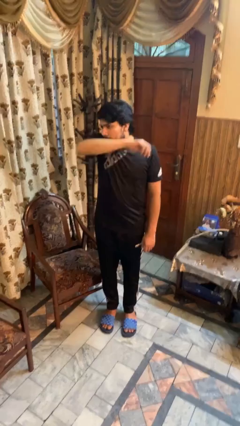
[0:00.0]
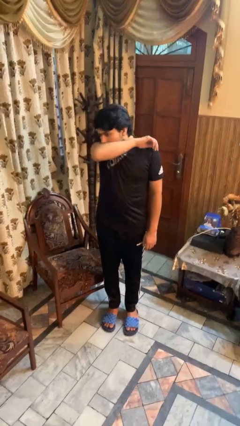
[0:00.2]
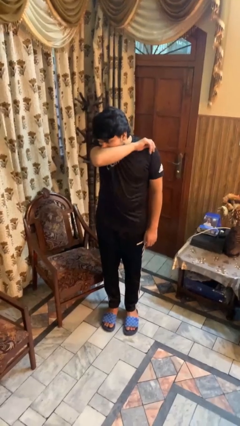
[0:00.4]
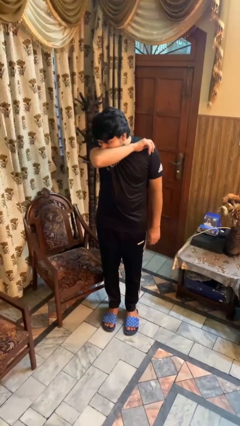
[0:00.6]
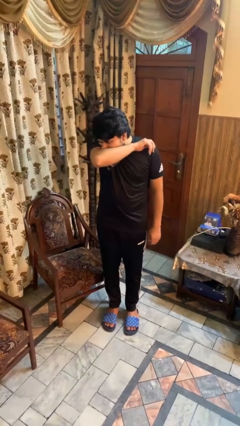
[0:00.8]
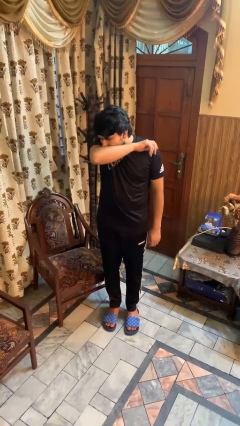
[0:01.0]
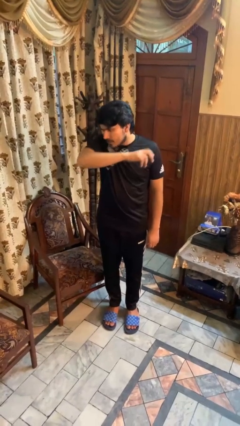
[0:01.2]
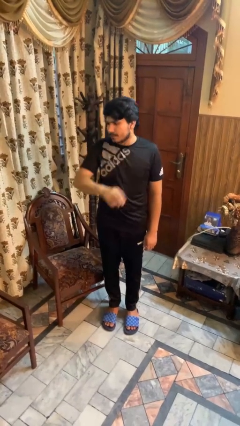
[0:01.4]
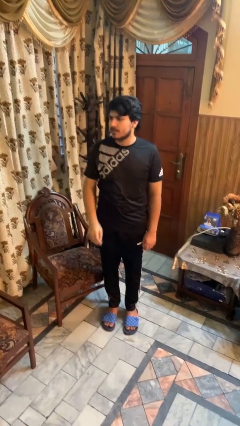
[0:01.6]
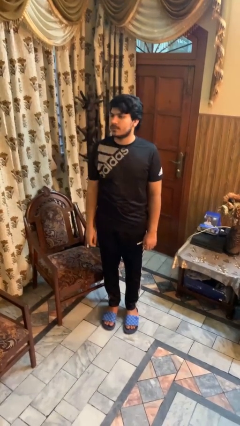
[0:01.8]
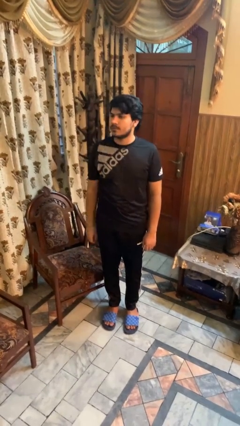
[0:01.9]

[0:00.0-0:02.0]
person sneezes into arm

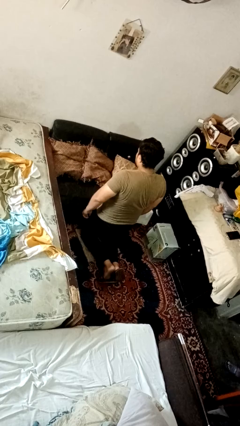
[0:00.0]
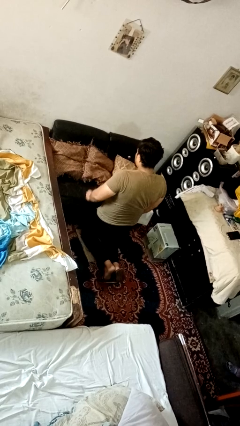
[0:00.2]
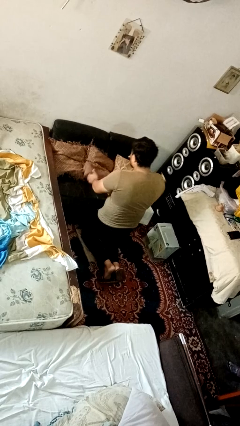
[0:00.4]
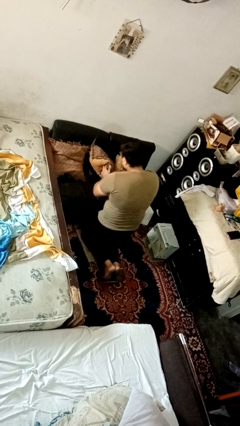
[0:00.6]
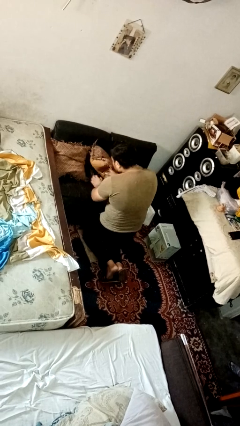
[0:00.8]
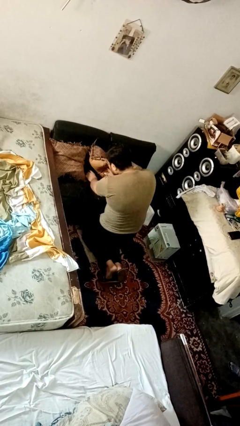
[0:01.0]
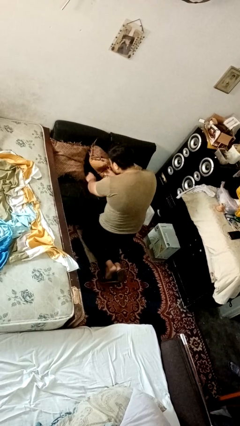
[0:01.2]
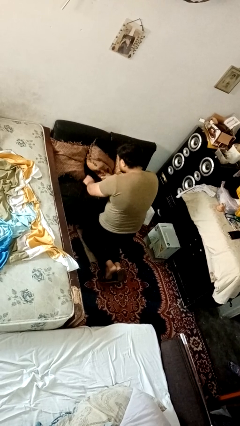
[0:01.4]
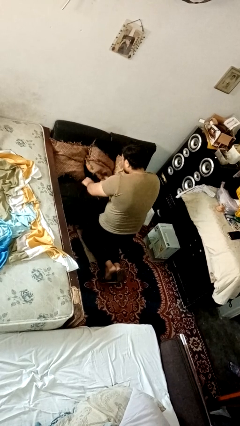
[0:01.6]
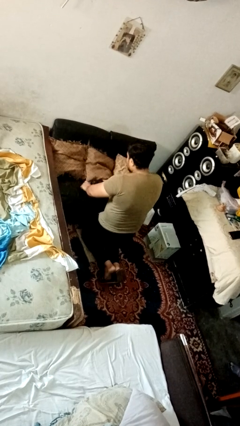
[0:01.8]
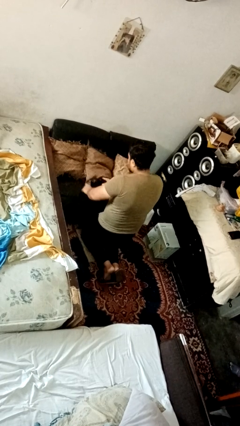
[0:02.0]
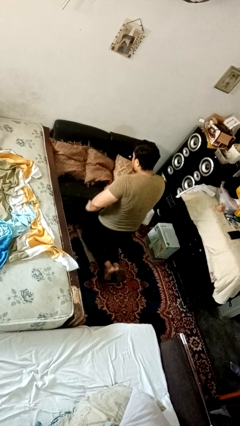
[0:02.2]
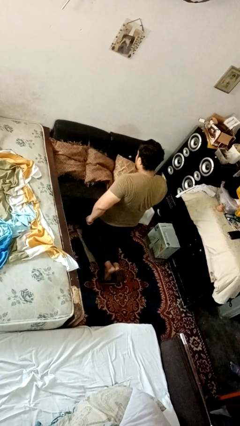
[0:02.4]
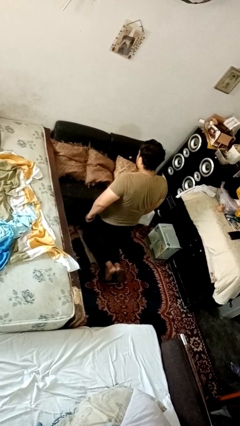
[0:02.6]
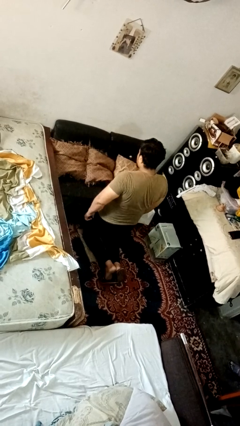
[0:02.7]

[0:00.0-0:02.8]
person searches in couch

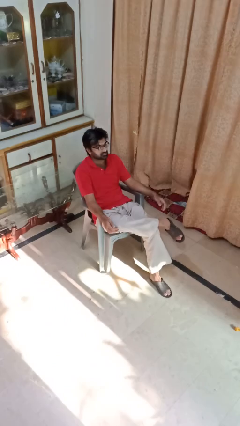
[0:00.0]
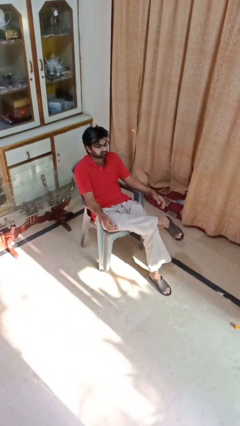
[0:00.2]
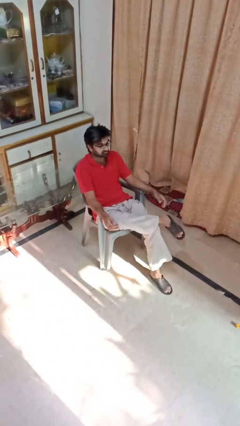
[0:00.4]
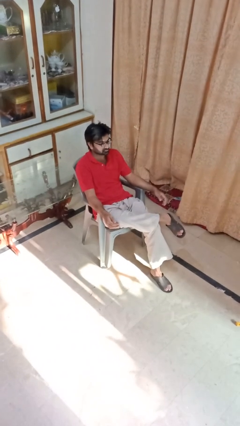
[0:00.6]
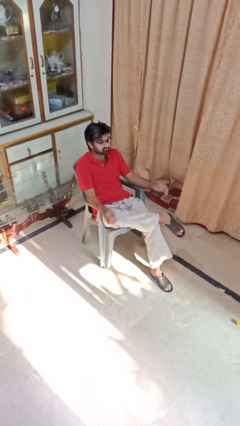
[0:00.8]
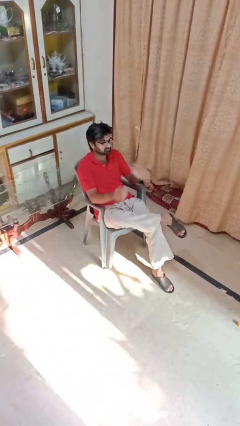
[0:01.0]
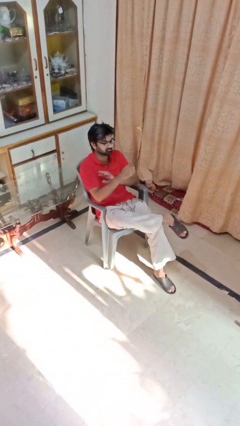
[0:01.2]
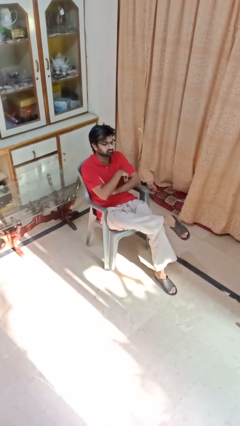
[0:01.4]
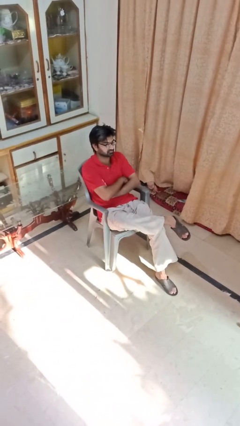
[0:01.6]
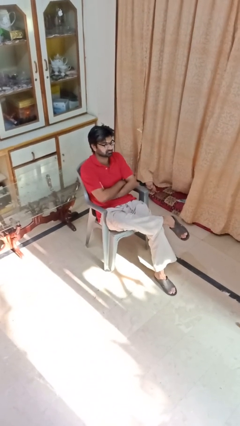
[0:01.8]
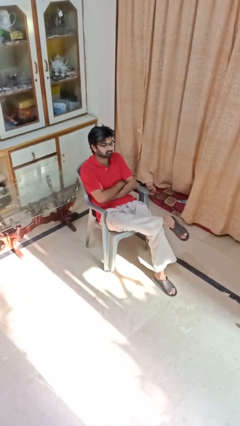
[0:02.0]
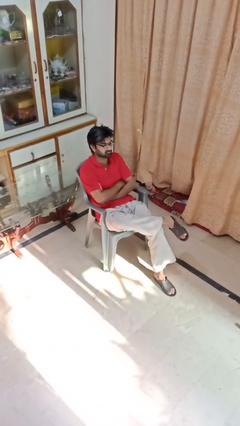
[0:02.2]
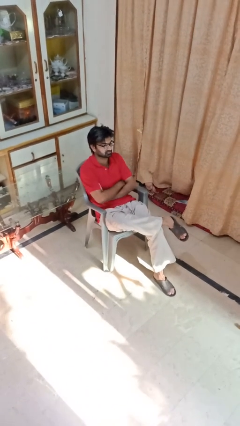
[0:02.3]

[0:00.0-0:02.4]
person crosses arms

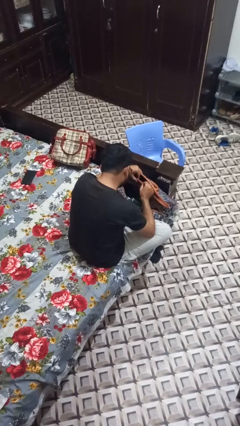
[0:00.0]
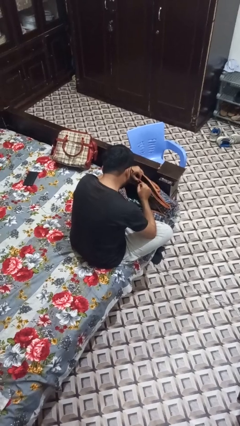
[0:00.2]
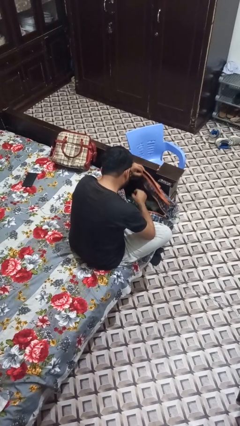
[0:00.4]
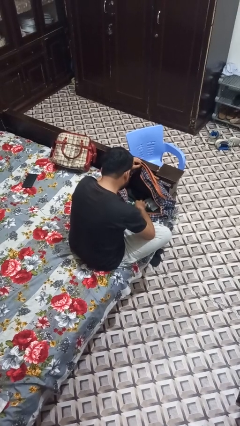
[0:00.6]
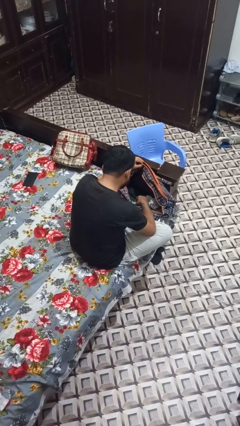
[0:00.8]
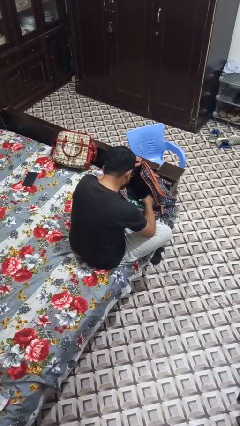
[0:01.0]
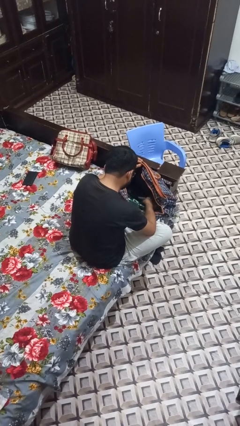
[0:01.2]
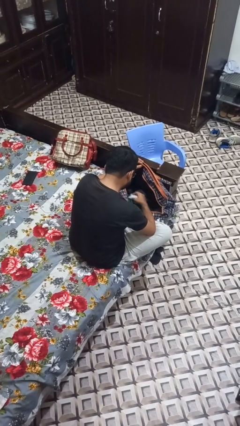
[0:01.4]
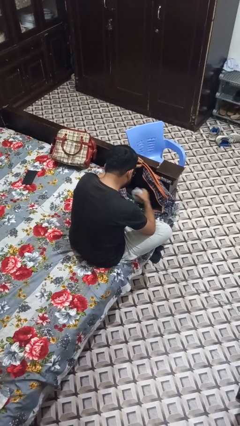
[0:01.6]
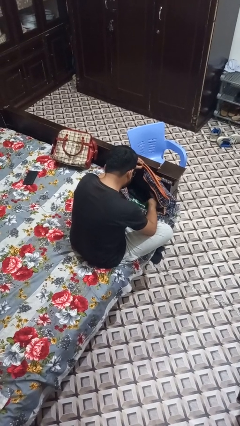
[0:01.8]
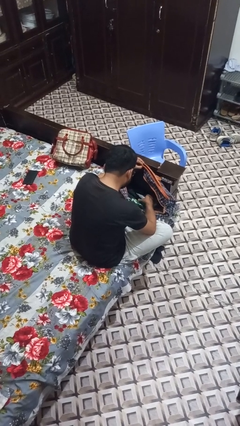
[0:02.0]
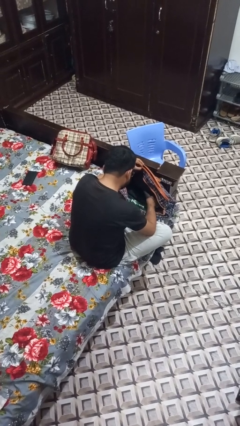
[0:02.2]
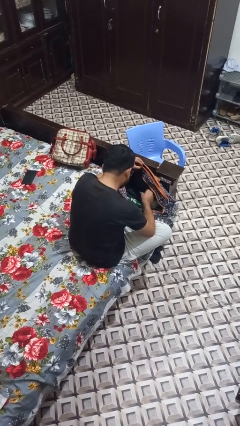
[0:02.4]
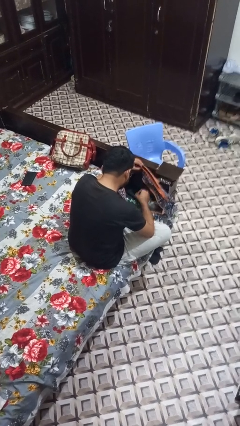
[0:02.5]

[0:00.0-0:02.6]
person searches in backpack

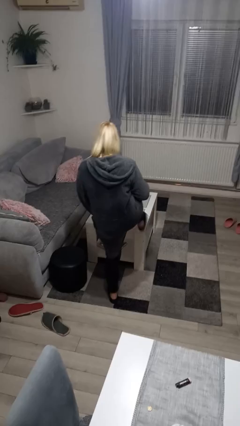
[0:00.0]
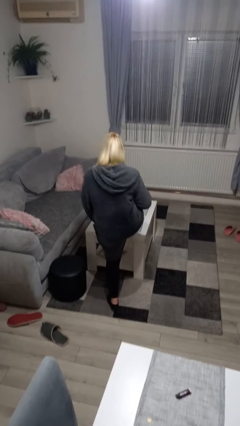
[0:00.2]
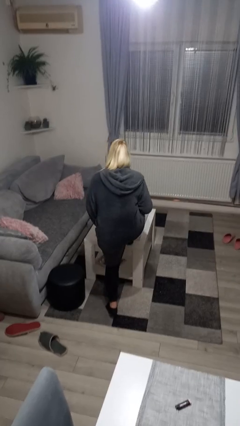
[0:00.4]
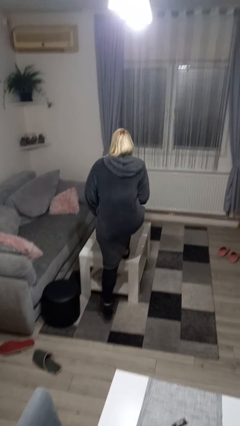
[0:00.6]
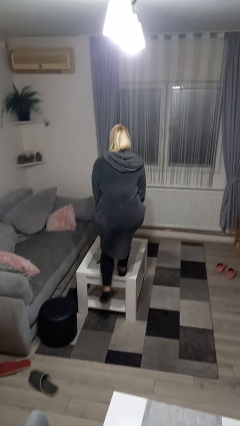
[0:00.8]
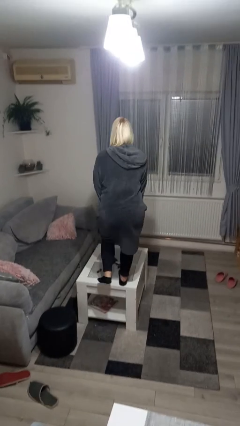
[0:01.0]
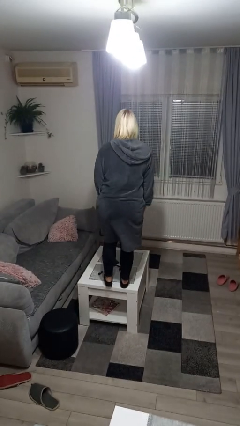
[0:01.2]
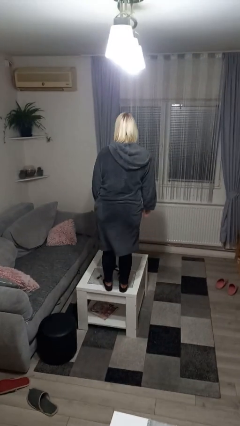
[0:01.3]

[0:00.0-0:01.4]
person climbs on table

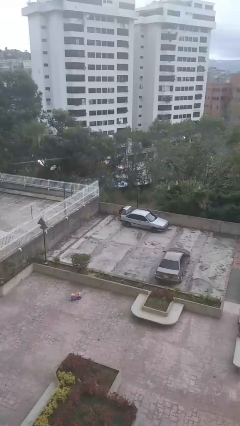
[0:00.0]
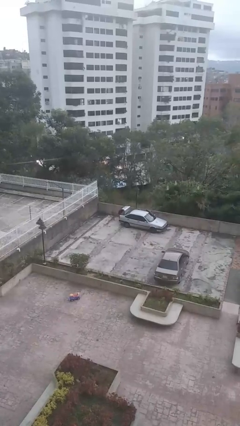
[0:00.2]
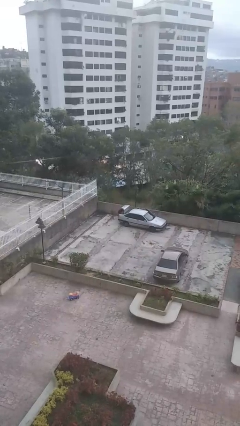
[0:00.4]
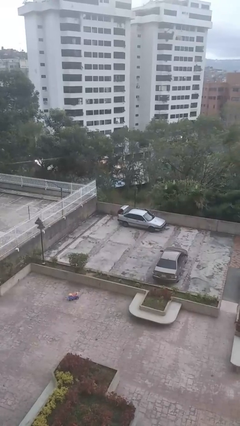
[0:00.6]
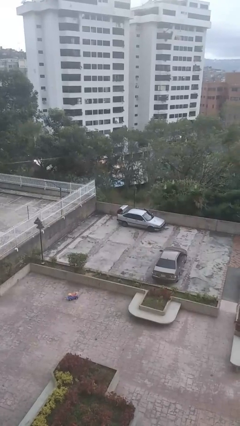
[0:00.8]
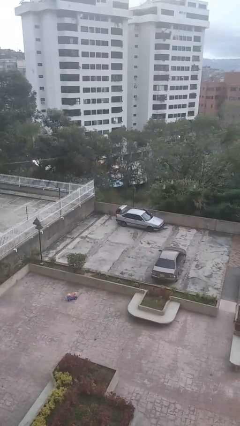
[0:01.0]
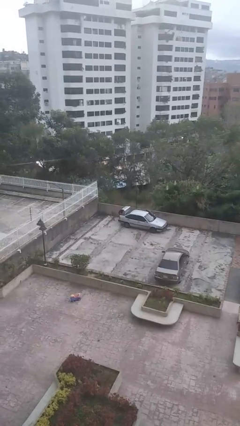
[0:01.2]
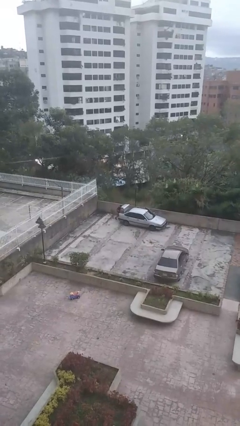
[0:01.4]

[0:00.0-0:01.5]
person unloads car

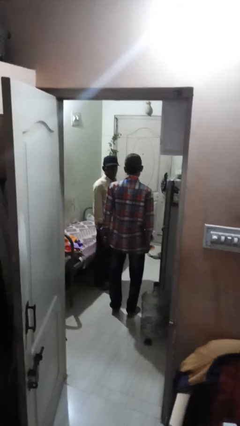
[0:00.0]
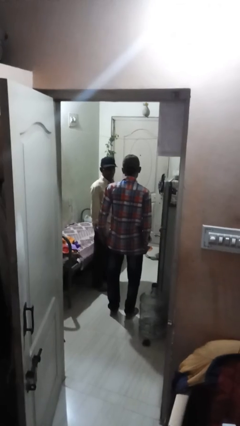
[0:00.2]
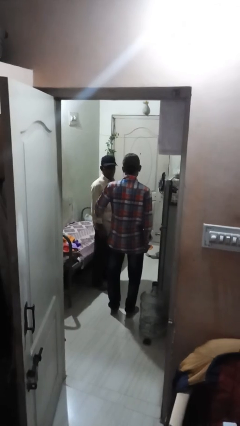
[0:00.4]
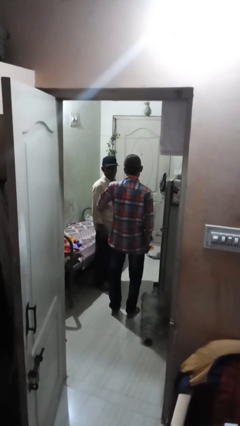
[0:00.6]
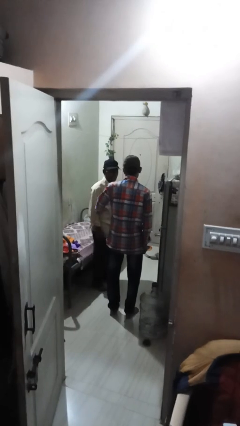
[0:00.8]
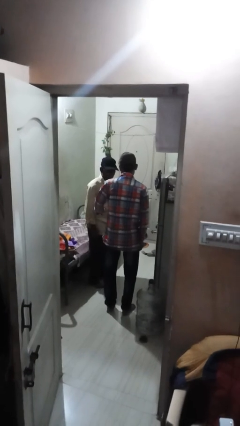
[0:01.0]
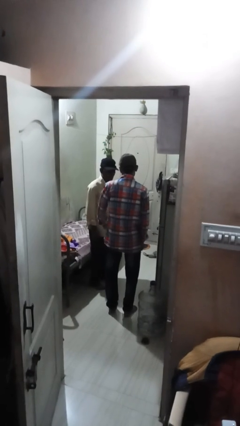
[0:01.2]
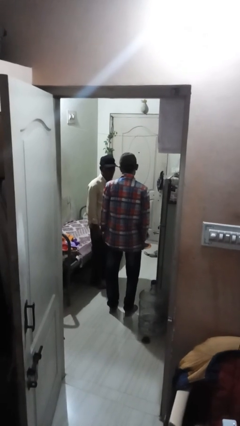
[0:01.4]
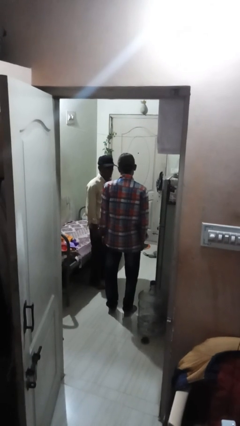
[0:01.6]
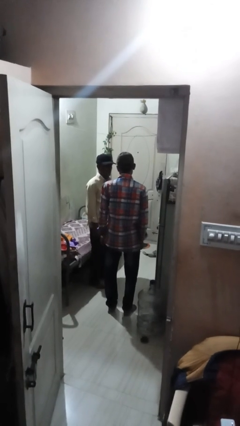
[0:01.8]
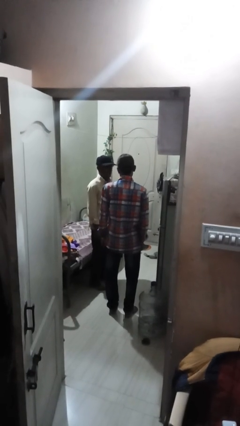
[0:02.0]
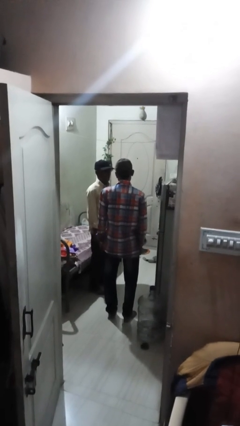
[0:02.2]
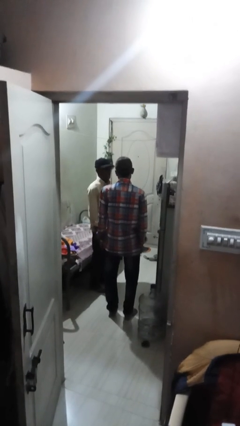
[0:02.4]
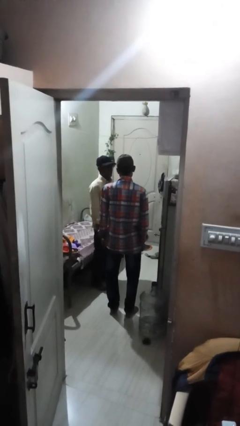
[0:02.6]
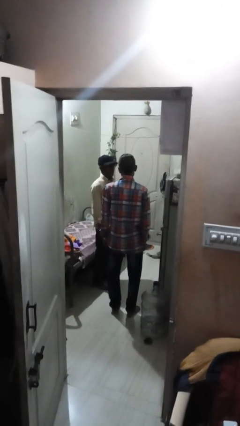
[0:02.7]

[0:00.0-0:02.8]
person tickles person

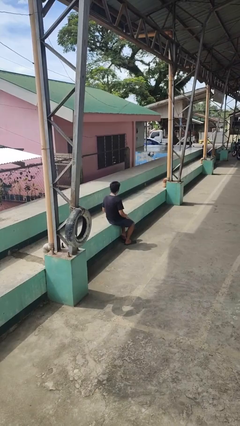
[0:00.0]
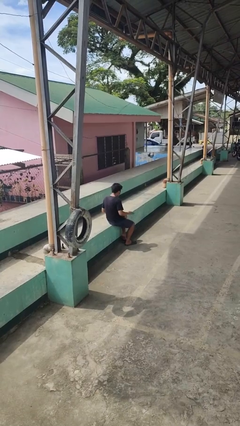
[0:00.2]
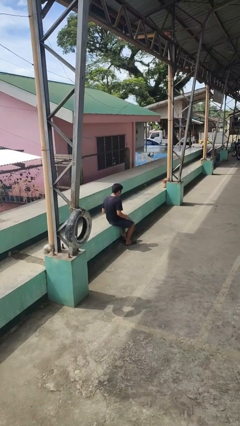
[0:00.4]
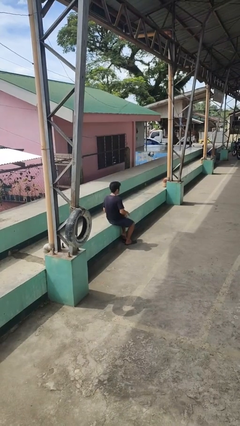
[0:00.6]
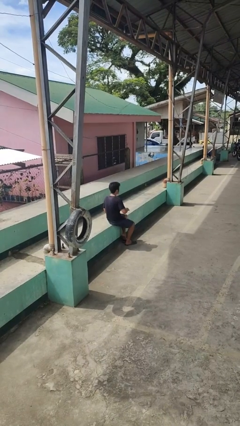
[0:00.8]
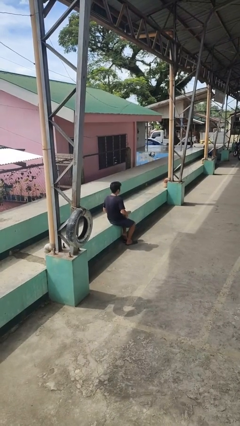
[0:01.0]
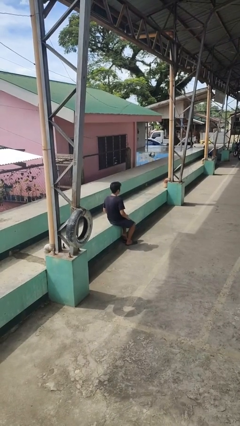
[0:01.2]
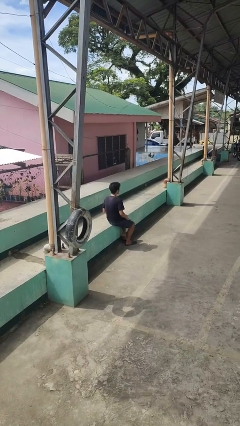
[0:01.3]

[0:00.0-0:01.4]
person slaps hands on thighs
